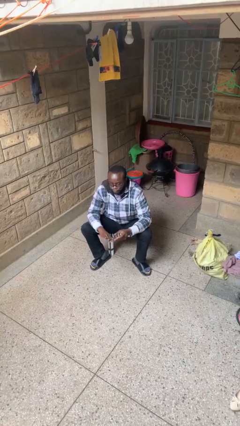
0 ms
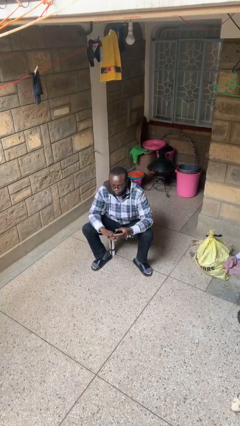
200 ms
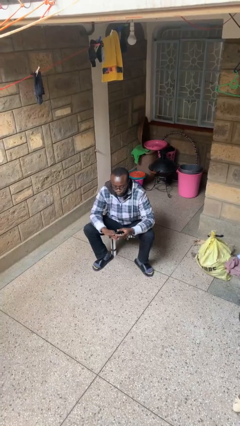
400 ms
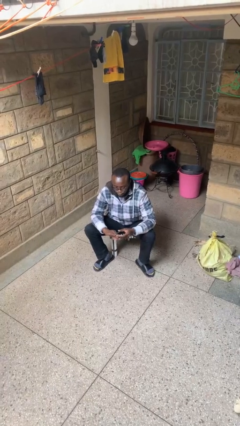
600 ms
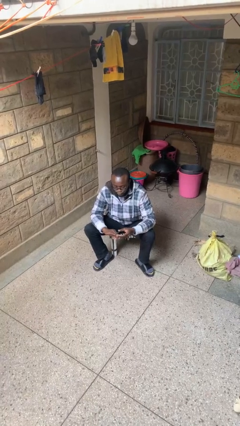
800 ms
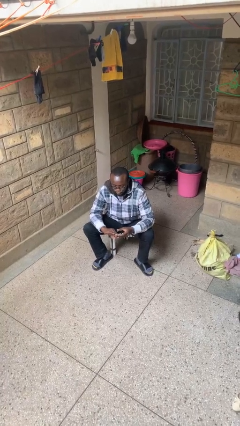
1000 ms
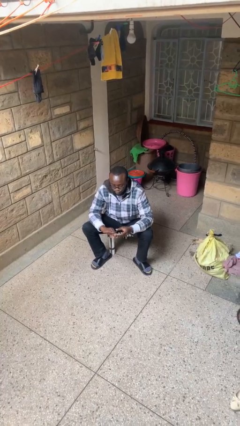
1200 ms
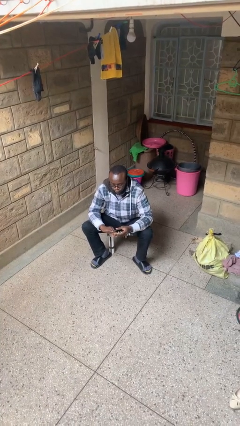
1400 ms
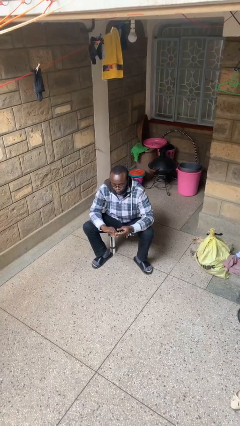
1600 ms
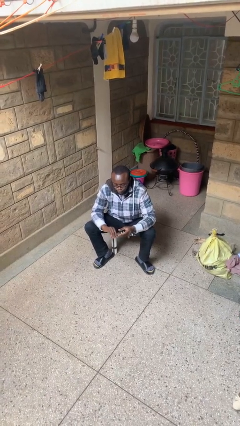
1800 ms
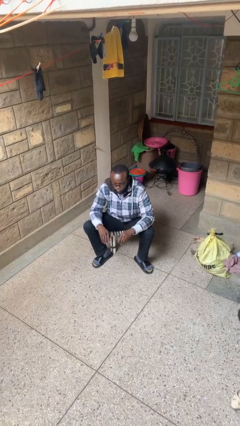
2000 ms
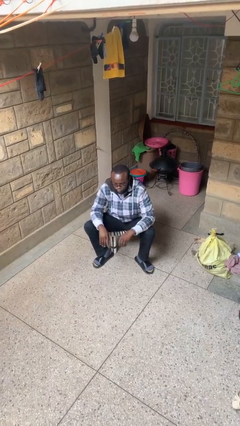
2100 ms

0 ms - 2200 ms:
person clips fingernails

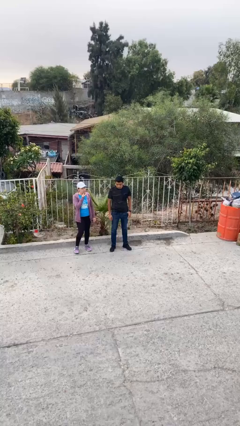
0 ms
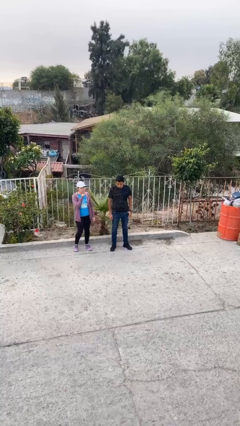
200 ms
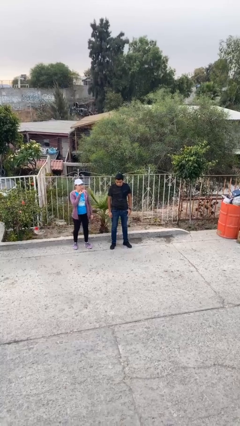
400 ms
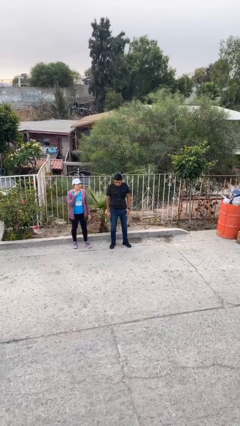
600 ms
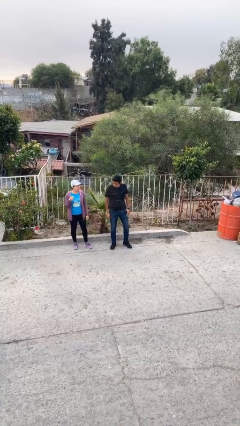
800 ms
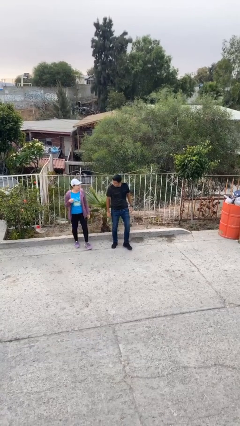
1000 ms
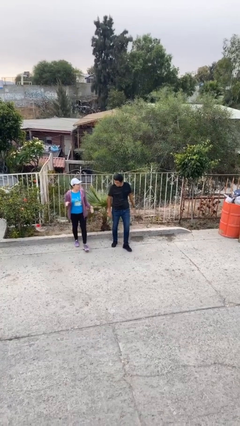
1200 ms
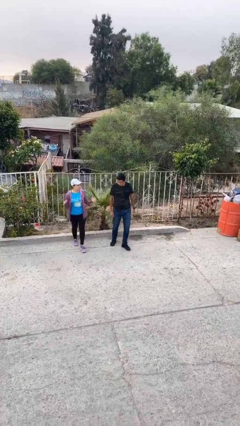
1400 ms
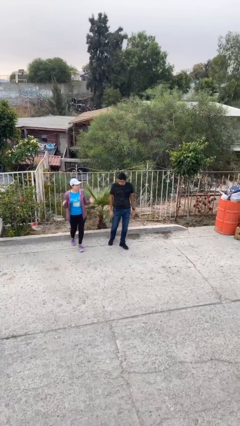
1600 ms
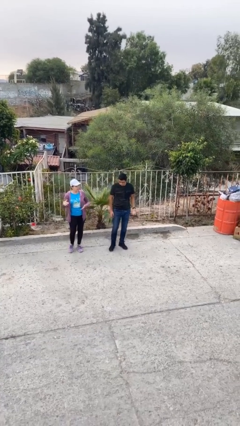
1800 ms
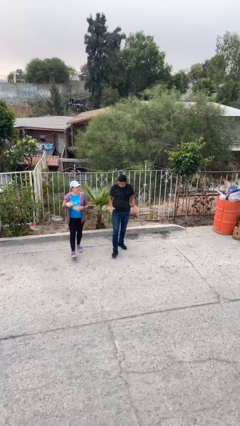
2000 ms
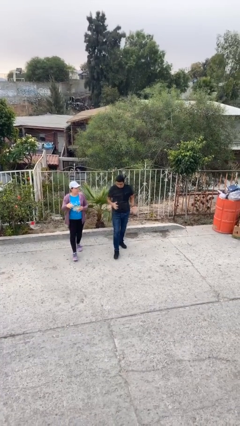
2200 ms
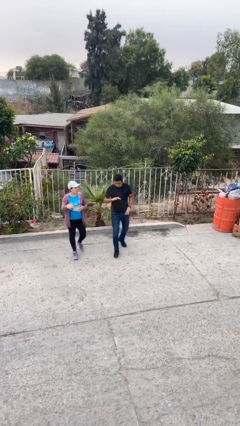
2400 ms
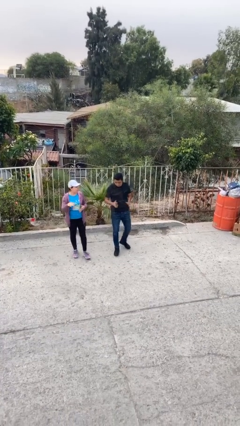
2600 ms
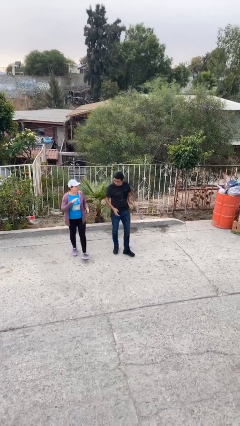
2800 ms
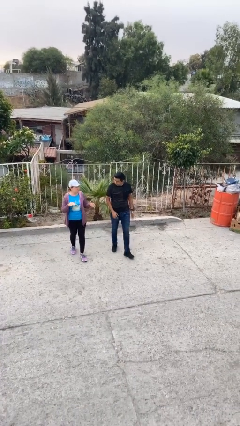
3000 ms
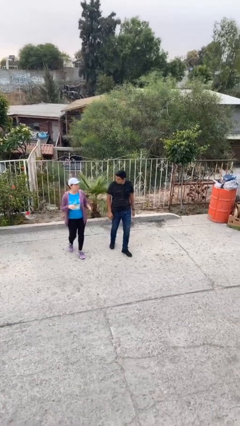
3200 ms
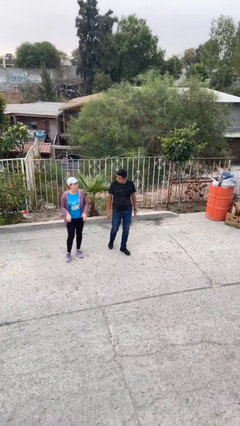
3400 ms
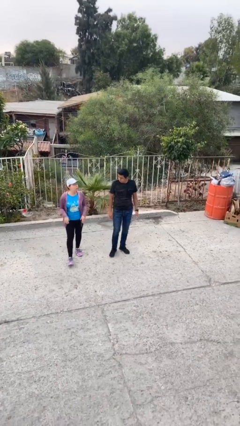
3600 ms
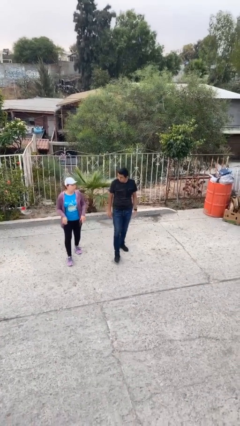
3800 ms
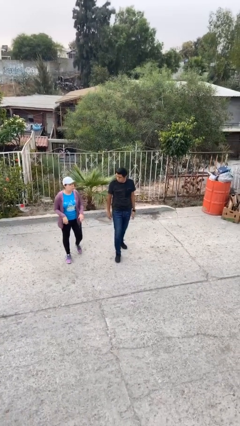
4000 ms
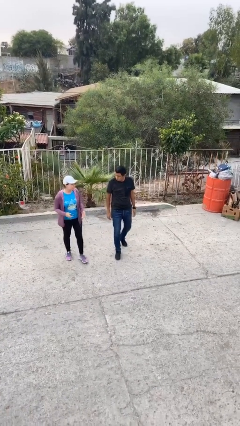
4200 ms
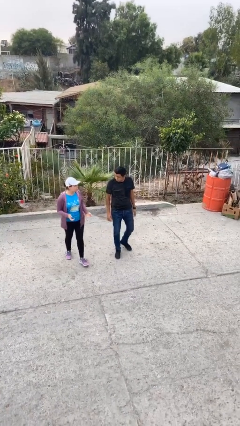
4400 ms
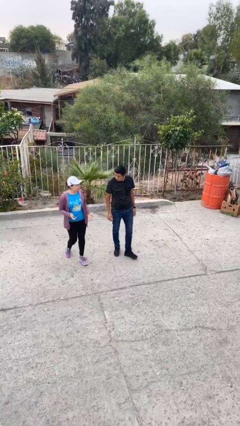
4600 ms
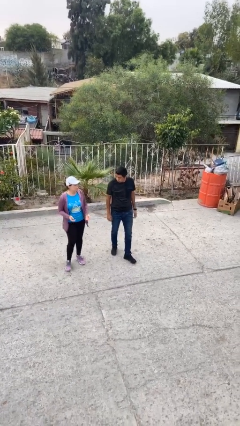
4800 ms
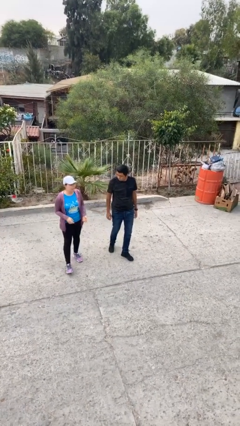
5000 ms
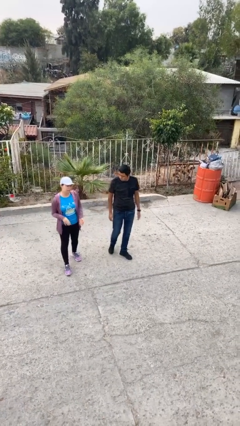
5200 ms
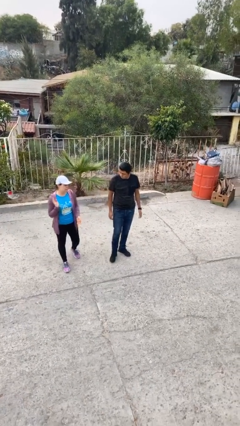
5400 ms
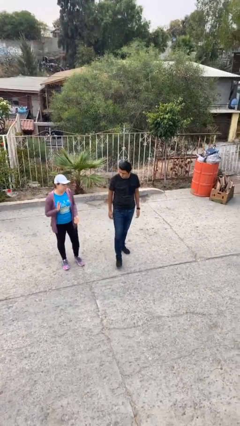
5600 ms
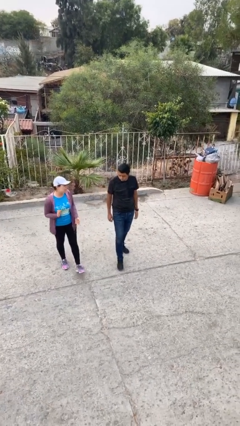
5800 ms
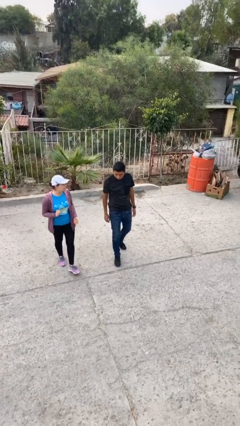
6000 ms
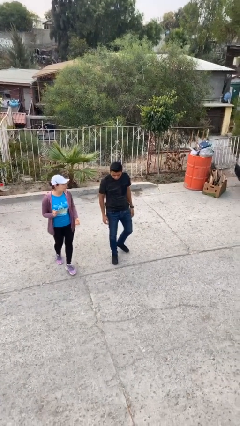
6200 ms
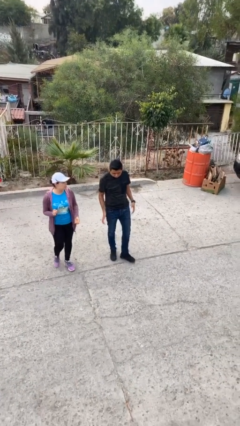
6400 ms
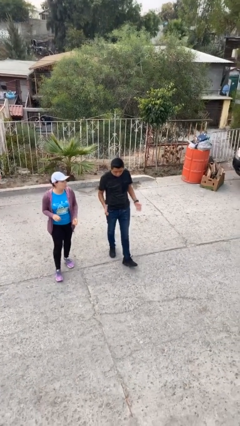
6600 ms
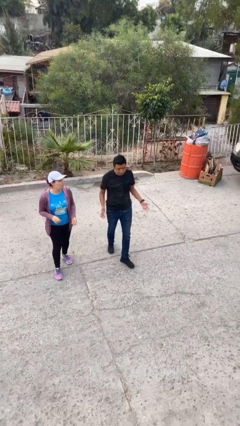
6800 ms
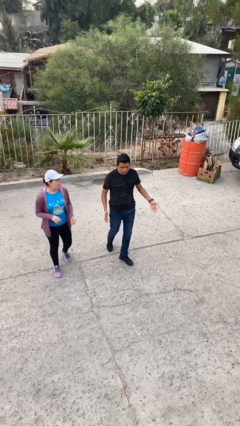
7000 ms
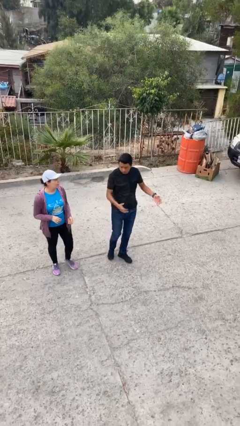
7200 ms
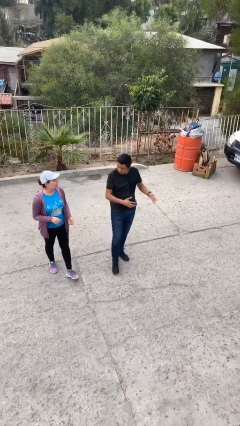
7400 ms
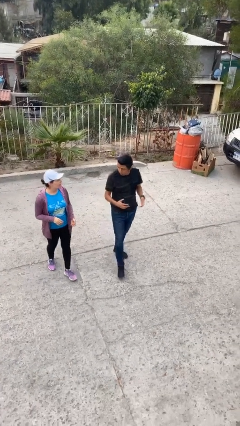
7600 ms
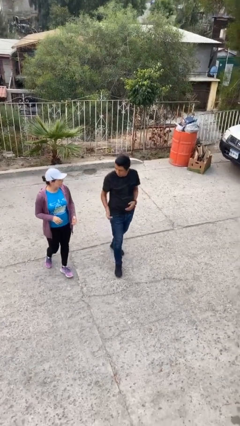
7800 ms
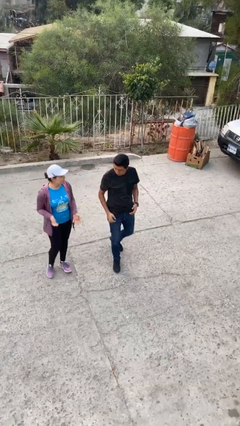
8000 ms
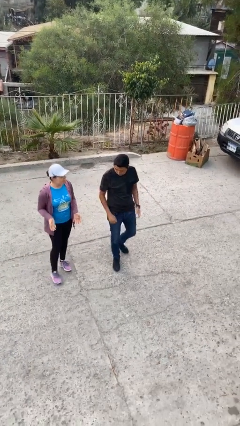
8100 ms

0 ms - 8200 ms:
person talks to person

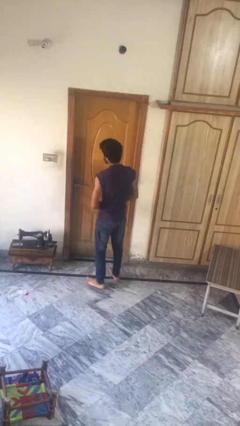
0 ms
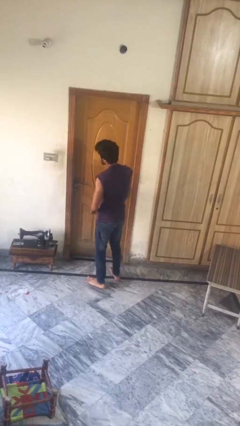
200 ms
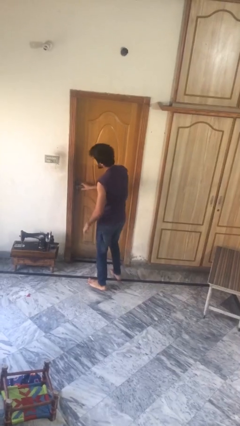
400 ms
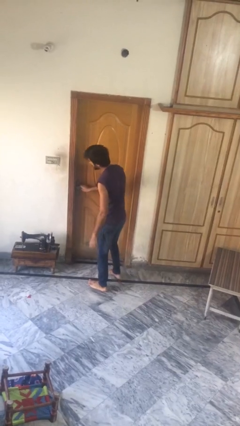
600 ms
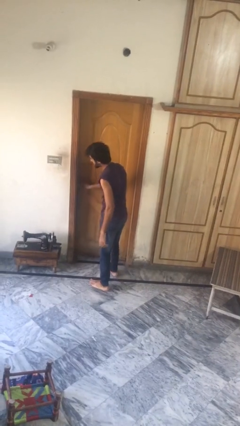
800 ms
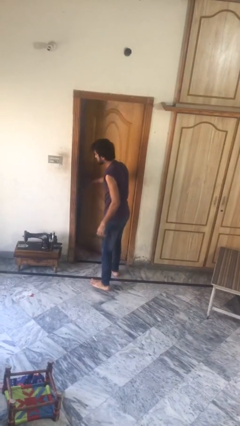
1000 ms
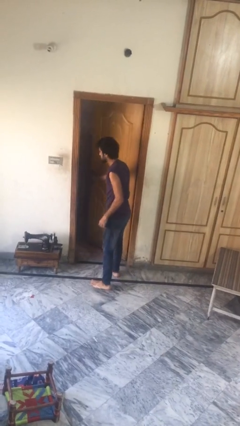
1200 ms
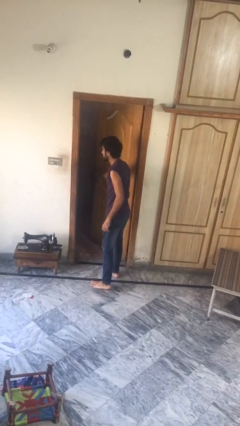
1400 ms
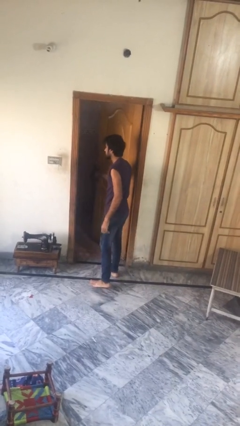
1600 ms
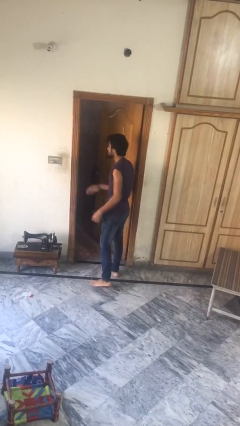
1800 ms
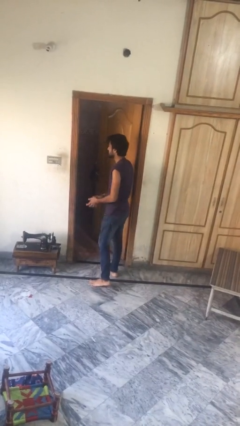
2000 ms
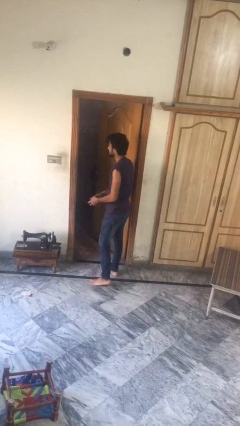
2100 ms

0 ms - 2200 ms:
person opens facility door

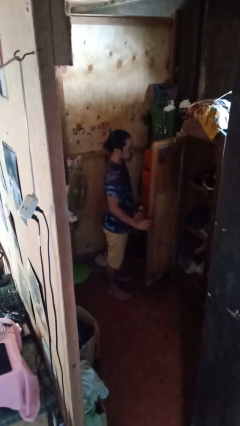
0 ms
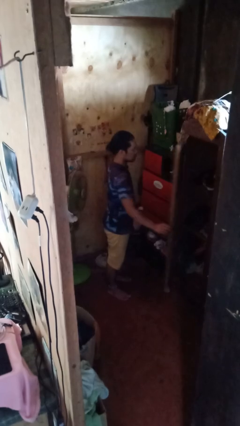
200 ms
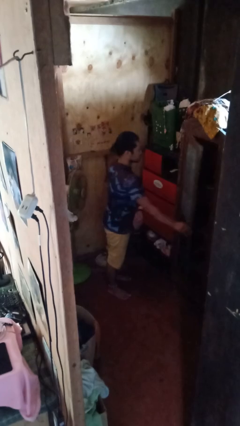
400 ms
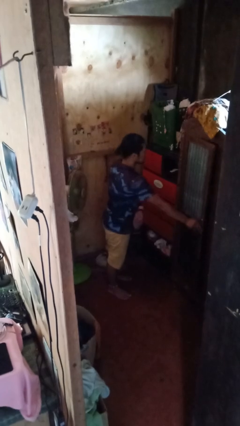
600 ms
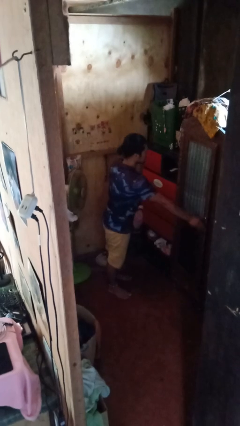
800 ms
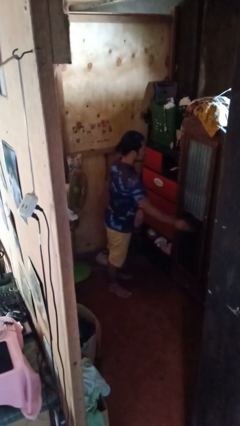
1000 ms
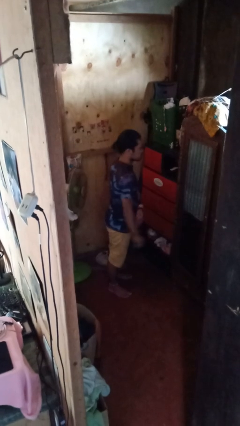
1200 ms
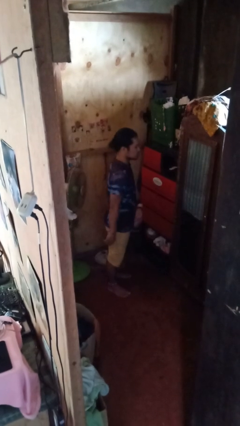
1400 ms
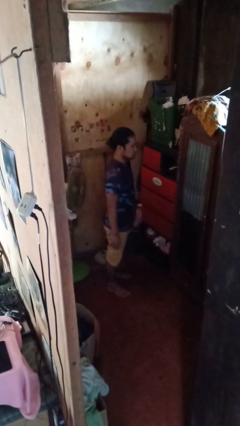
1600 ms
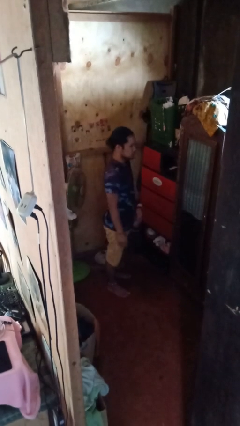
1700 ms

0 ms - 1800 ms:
person closes closet door

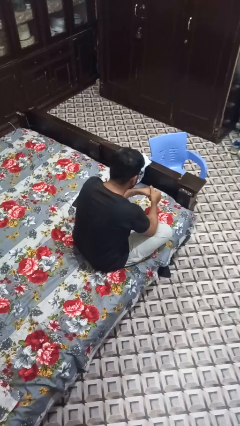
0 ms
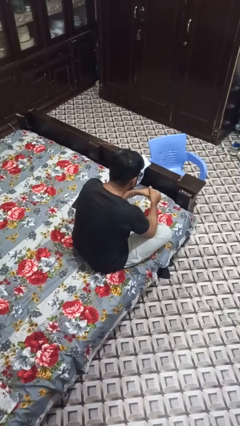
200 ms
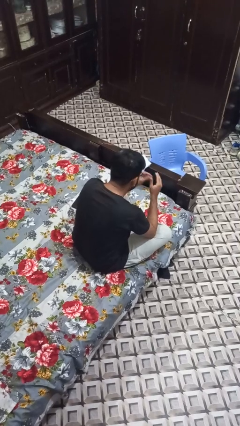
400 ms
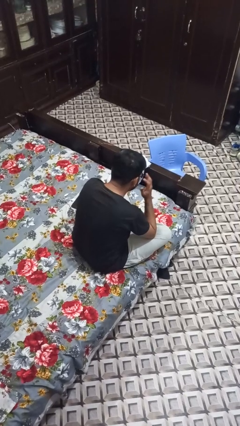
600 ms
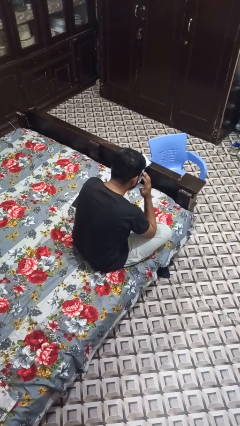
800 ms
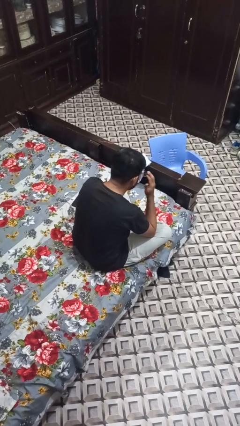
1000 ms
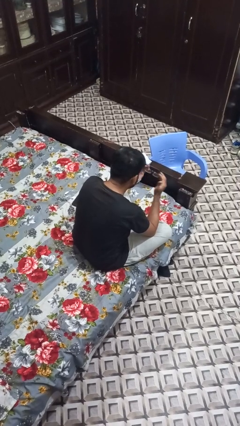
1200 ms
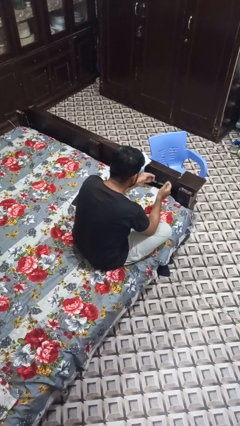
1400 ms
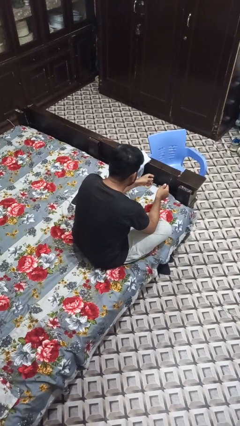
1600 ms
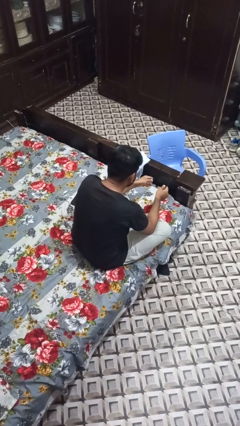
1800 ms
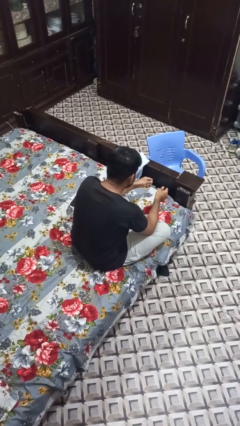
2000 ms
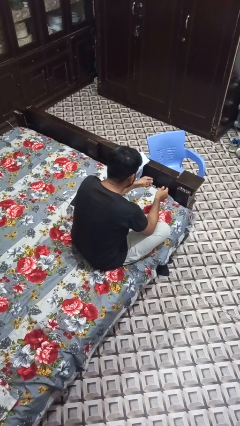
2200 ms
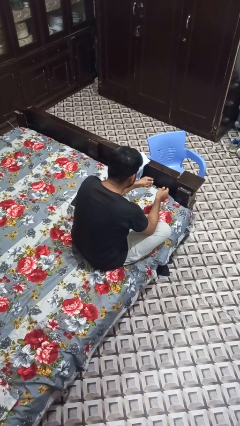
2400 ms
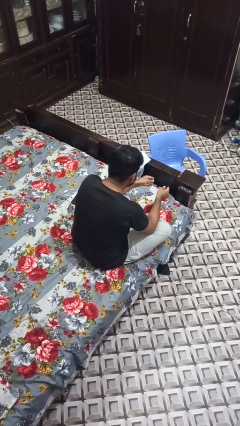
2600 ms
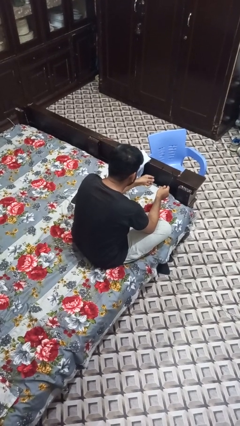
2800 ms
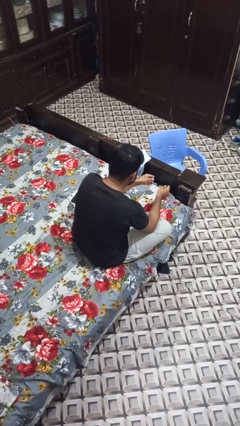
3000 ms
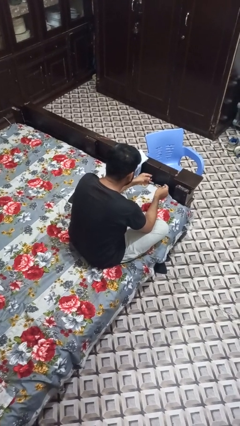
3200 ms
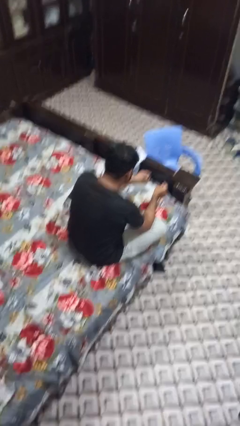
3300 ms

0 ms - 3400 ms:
person takes off glasses
